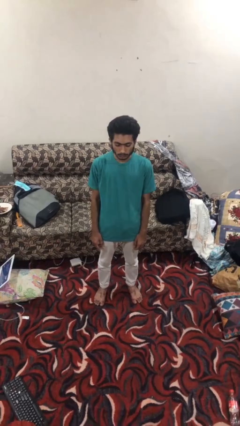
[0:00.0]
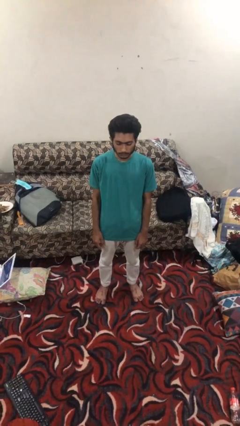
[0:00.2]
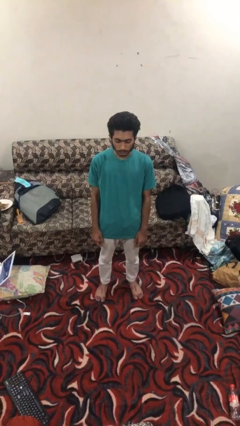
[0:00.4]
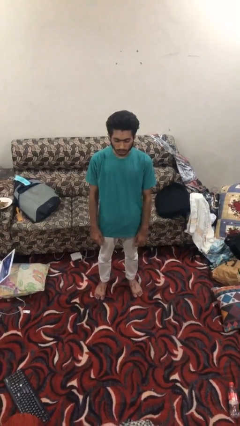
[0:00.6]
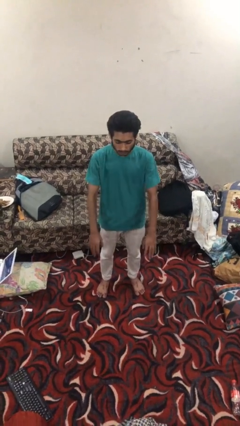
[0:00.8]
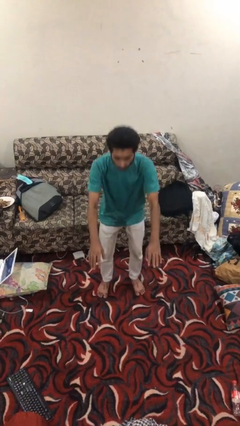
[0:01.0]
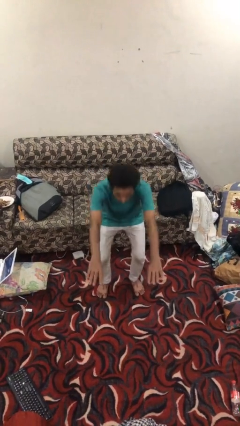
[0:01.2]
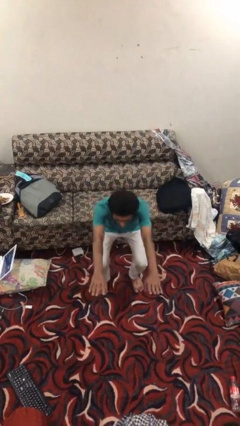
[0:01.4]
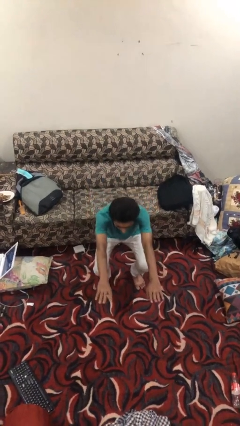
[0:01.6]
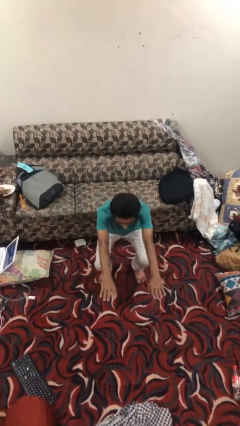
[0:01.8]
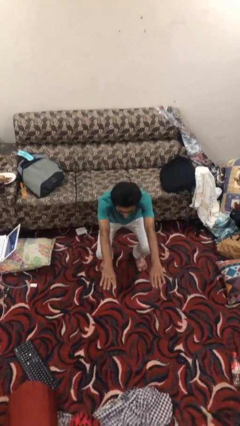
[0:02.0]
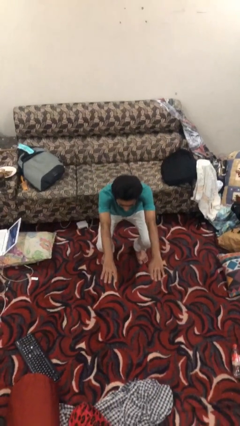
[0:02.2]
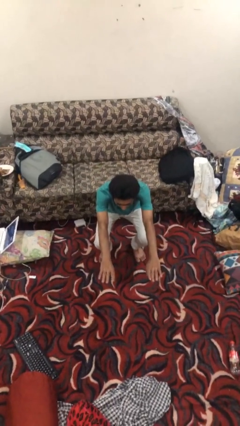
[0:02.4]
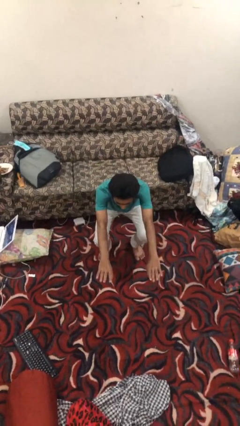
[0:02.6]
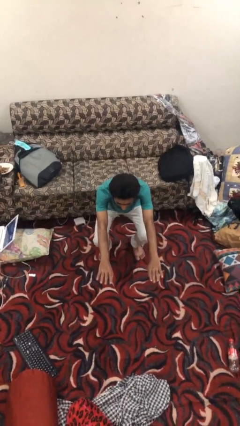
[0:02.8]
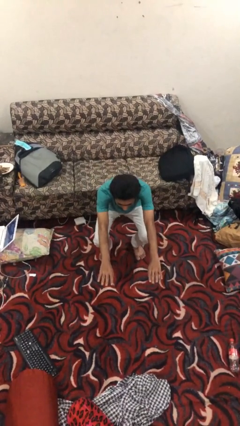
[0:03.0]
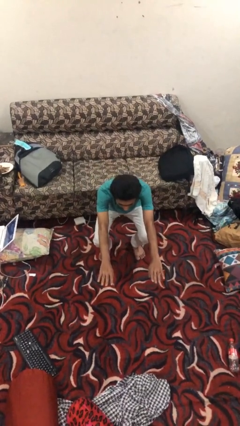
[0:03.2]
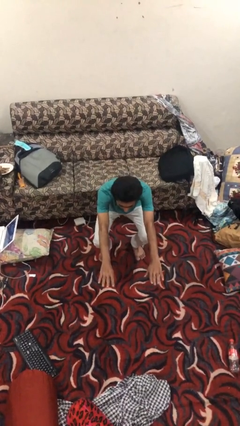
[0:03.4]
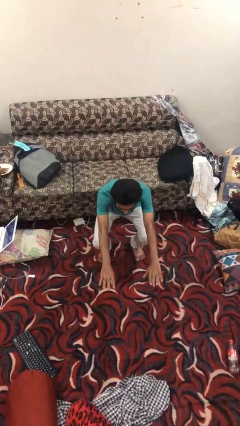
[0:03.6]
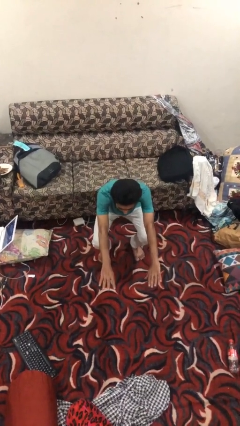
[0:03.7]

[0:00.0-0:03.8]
person squats

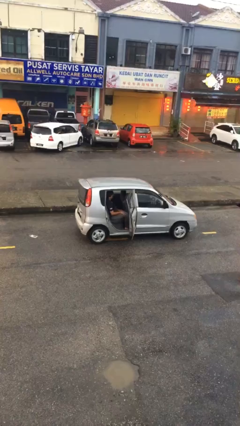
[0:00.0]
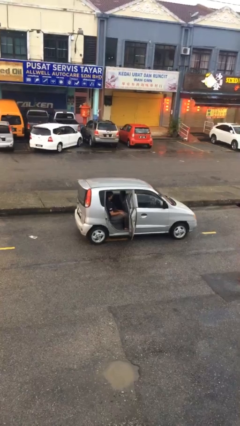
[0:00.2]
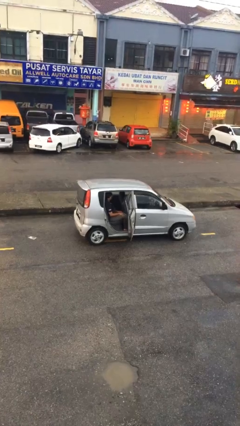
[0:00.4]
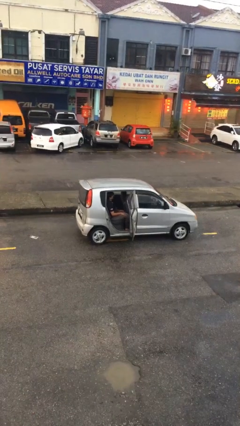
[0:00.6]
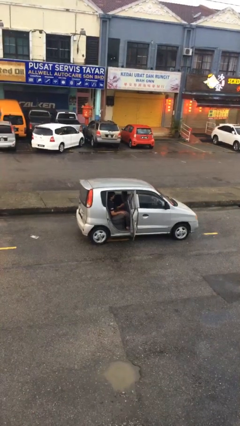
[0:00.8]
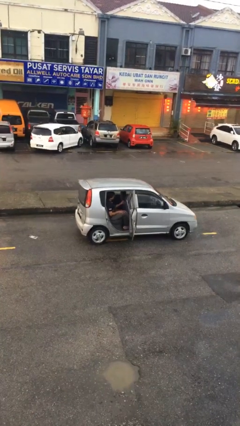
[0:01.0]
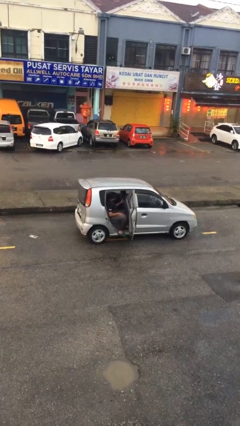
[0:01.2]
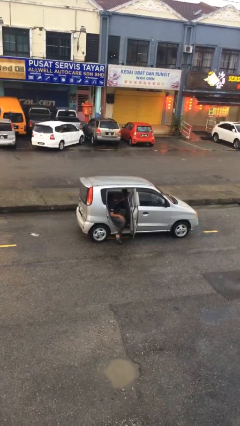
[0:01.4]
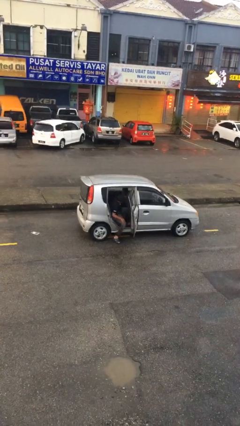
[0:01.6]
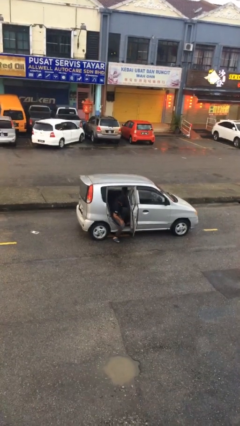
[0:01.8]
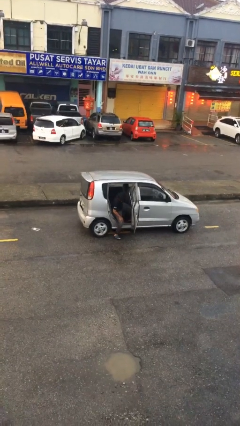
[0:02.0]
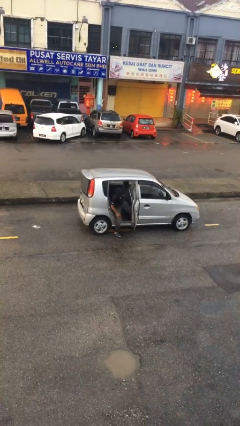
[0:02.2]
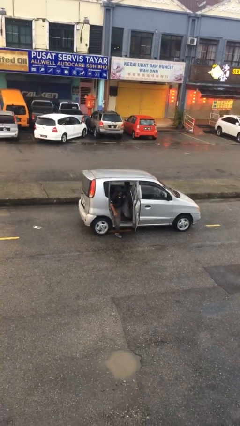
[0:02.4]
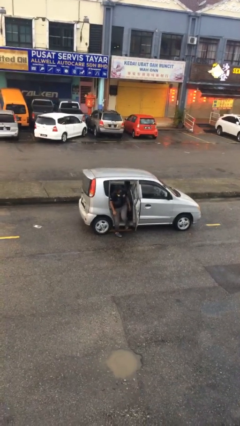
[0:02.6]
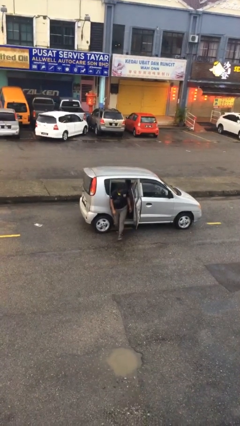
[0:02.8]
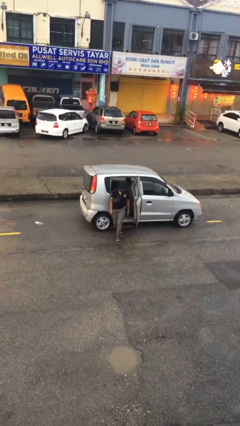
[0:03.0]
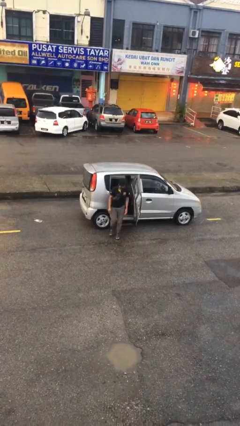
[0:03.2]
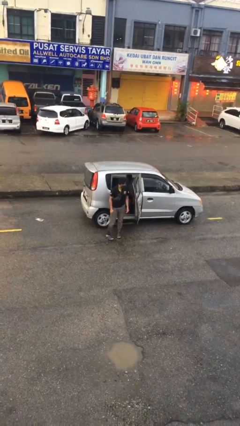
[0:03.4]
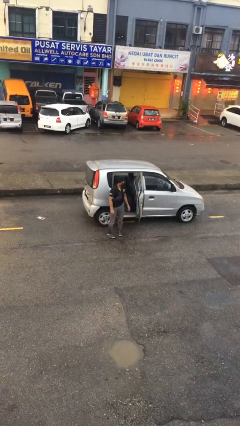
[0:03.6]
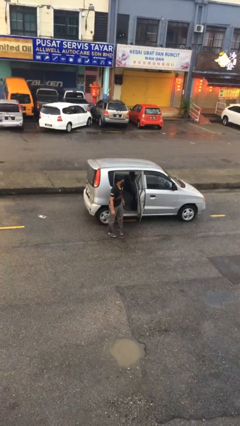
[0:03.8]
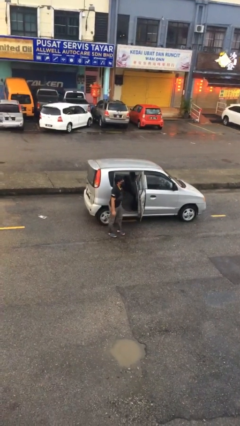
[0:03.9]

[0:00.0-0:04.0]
person exits car

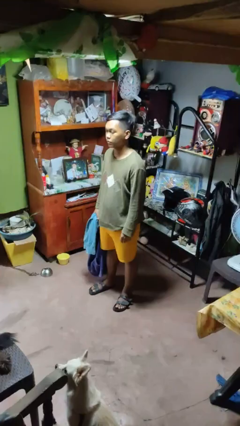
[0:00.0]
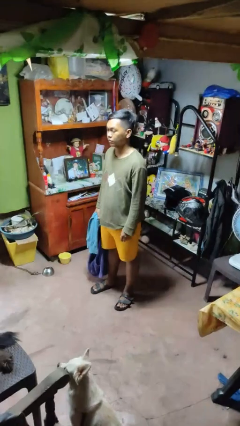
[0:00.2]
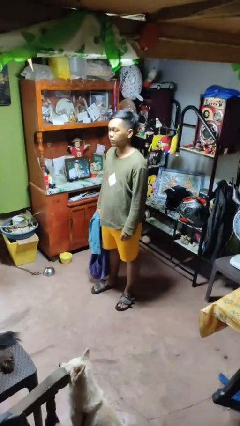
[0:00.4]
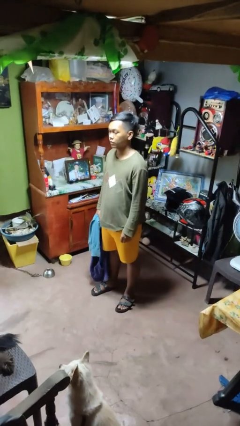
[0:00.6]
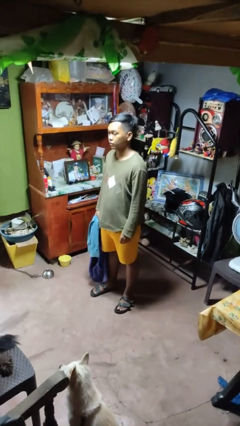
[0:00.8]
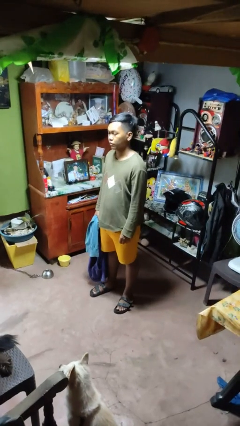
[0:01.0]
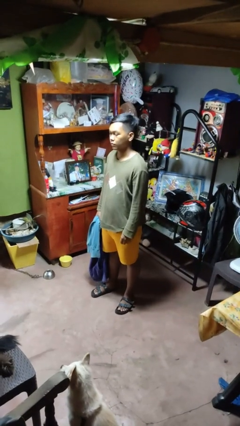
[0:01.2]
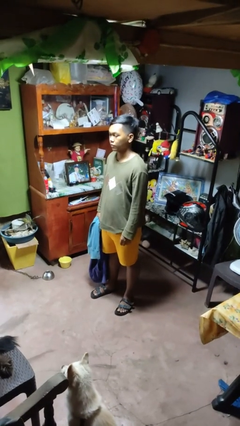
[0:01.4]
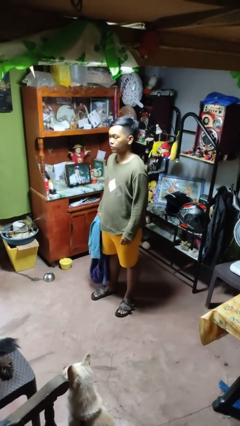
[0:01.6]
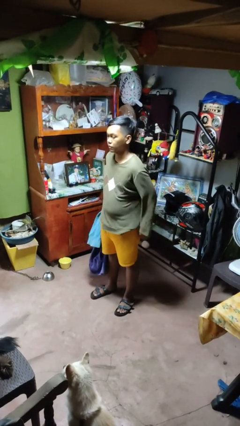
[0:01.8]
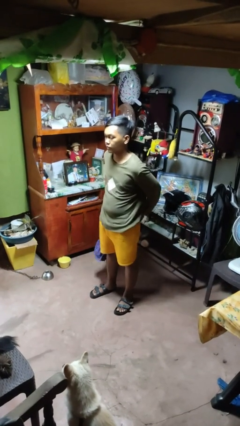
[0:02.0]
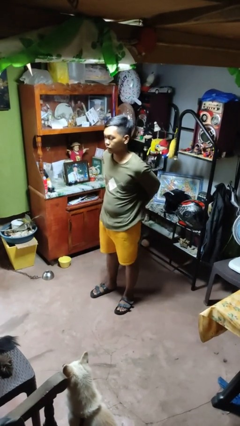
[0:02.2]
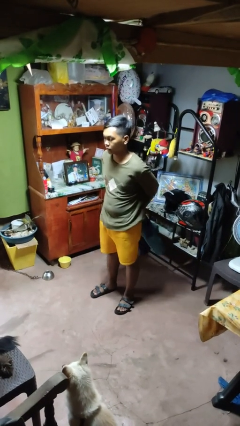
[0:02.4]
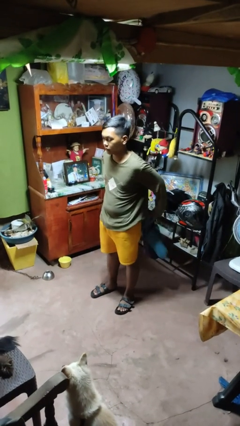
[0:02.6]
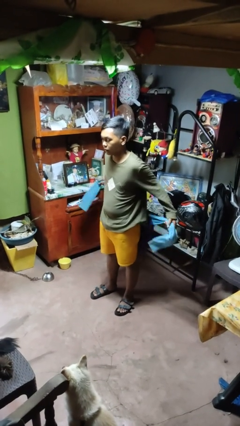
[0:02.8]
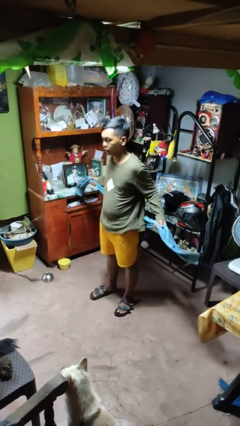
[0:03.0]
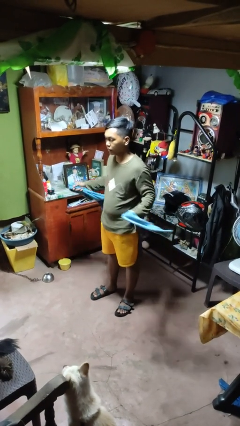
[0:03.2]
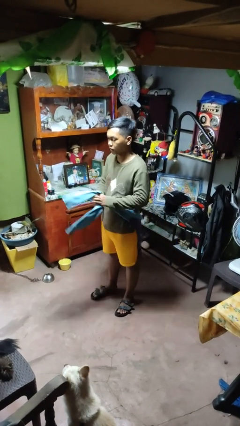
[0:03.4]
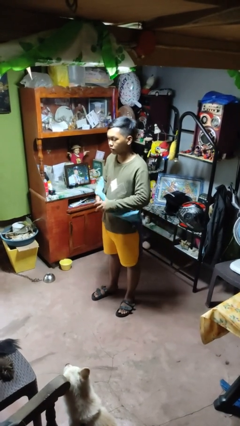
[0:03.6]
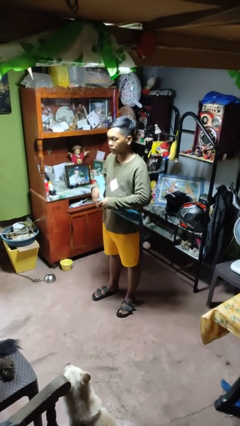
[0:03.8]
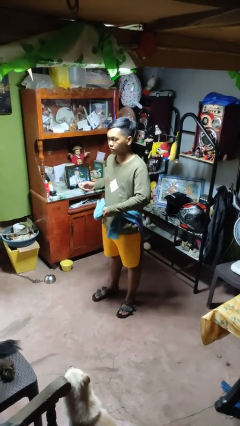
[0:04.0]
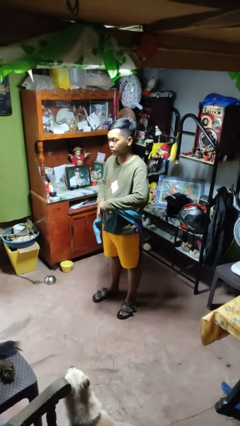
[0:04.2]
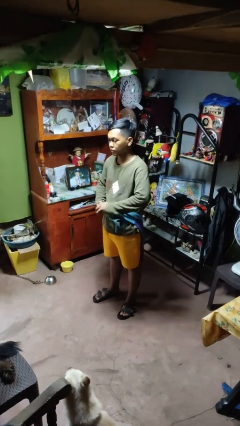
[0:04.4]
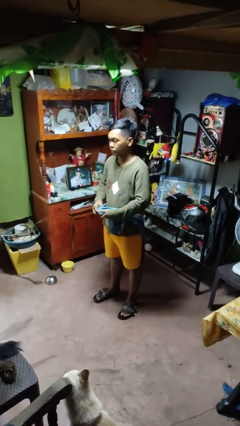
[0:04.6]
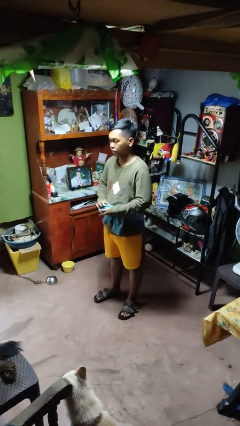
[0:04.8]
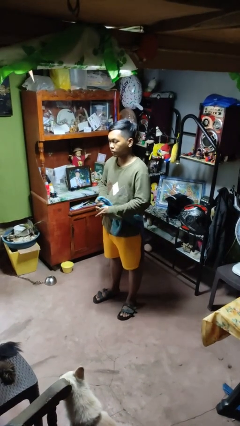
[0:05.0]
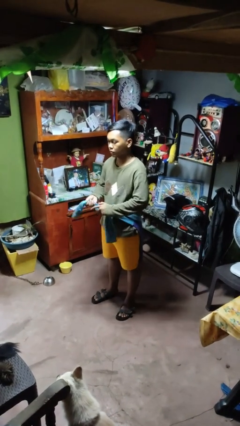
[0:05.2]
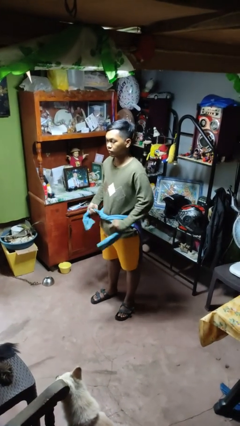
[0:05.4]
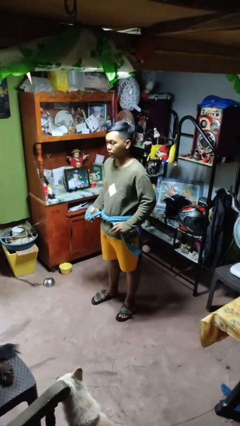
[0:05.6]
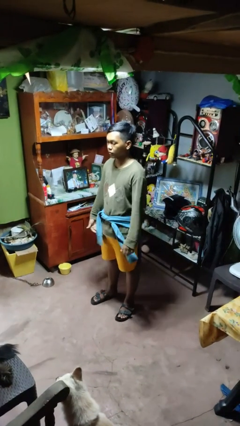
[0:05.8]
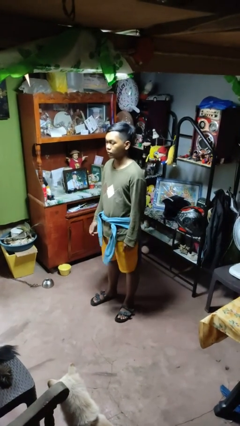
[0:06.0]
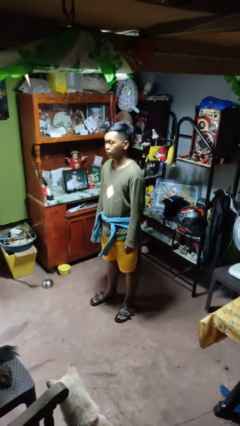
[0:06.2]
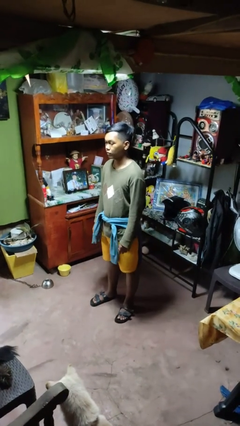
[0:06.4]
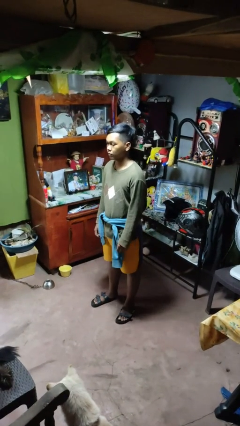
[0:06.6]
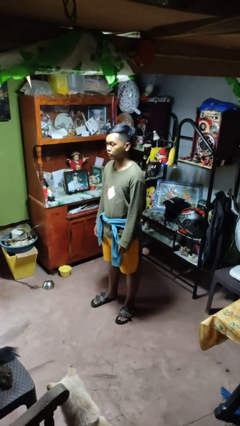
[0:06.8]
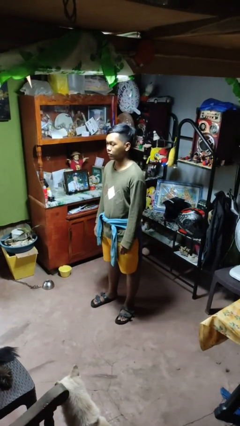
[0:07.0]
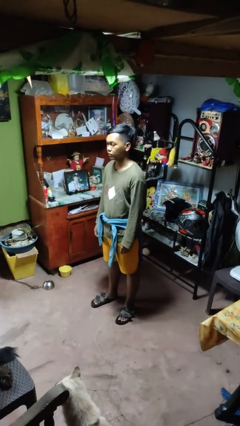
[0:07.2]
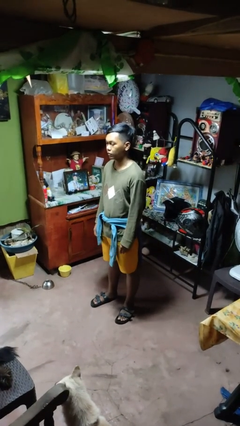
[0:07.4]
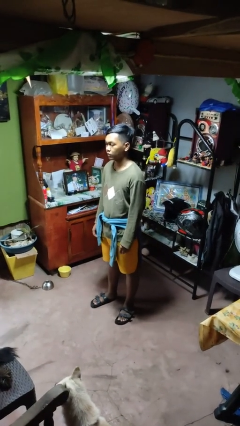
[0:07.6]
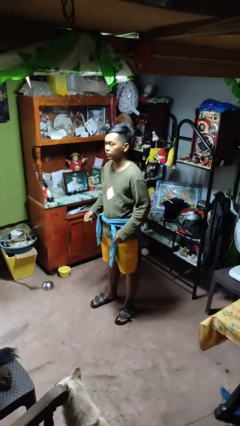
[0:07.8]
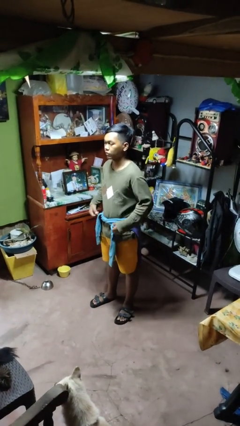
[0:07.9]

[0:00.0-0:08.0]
person ties jacket around waist

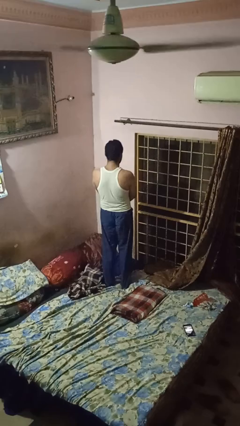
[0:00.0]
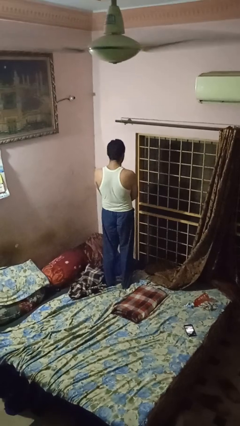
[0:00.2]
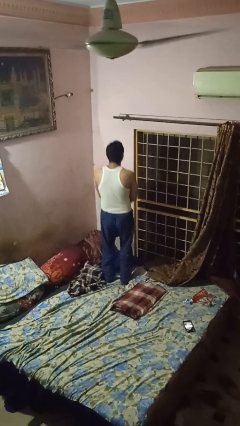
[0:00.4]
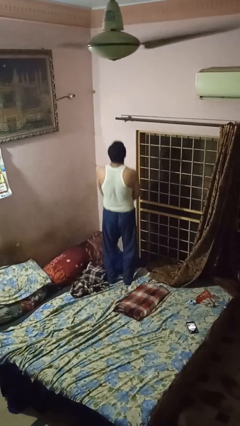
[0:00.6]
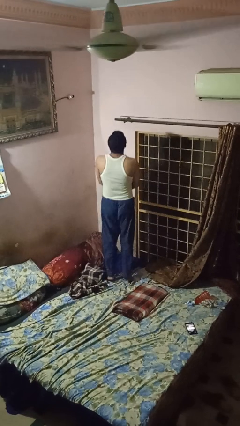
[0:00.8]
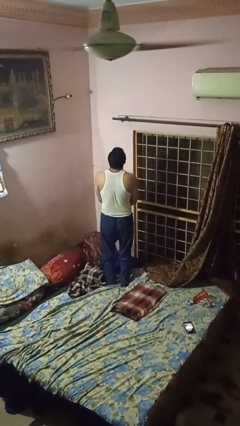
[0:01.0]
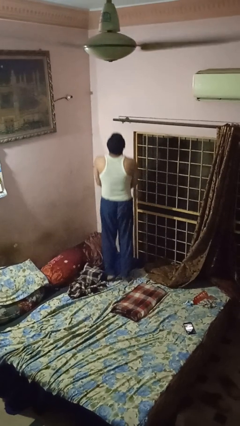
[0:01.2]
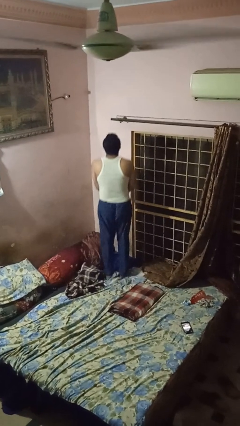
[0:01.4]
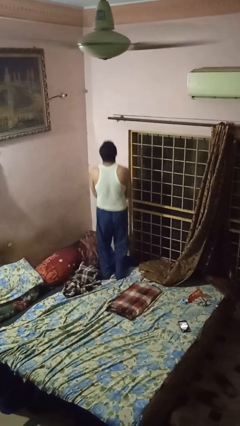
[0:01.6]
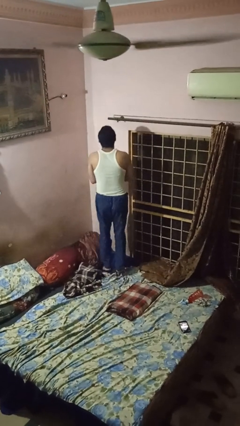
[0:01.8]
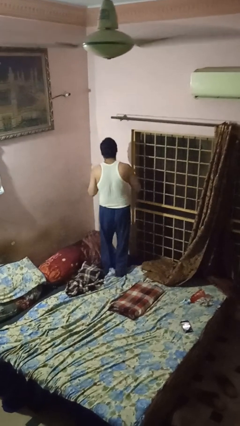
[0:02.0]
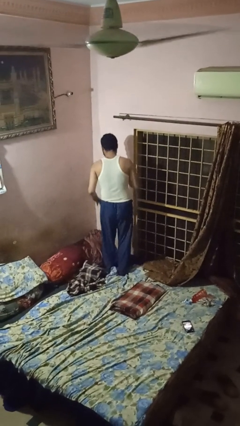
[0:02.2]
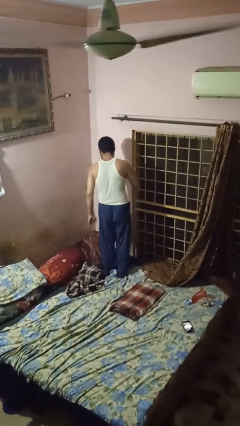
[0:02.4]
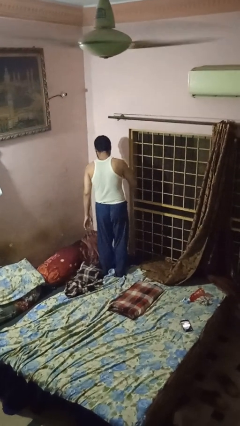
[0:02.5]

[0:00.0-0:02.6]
person jumps on bed
